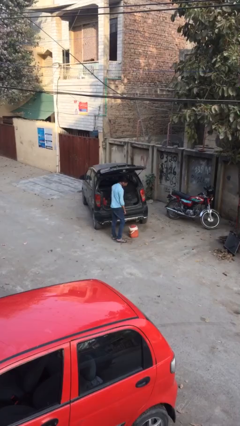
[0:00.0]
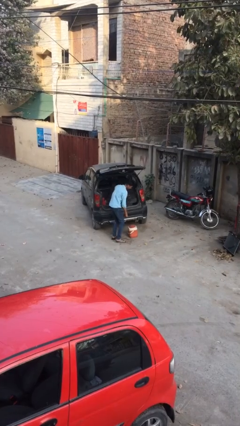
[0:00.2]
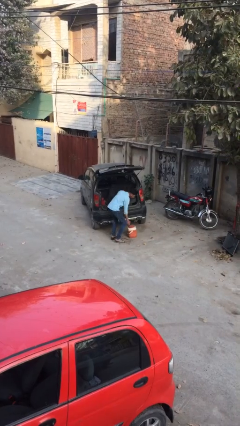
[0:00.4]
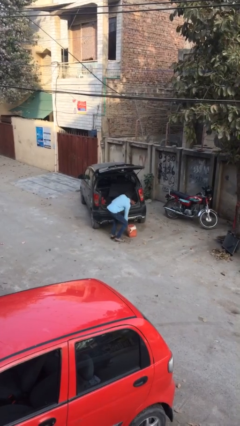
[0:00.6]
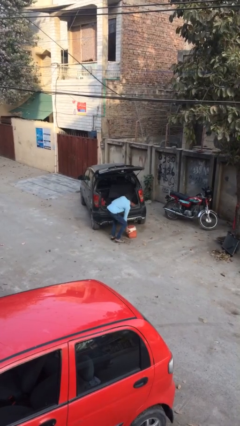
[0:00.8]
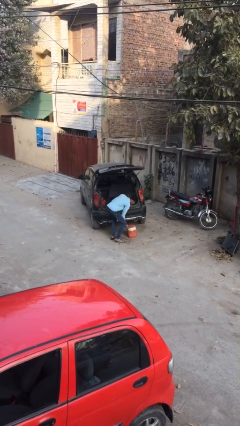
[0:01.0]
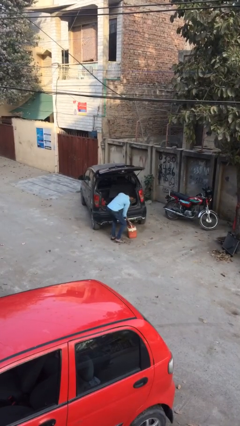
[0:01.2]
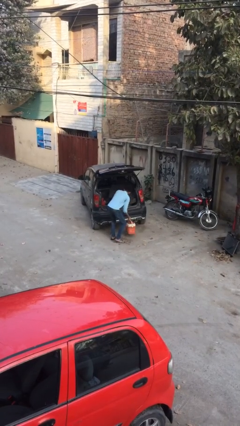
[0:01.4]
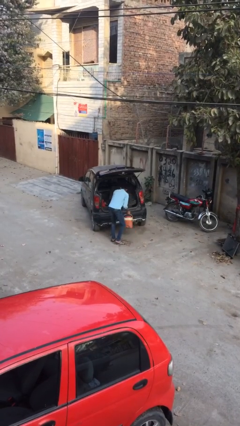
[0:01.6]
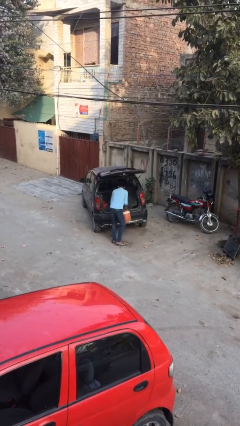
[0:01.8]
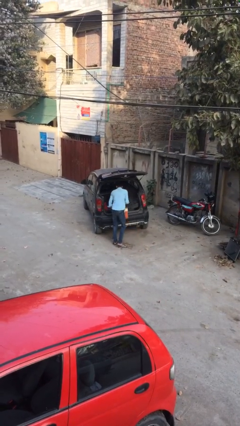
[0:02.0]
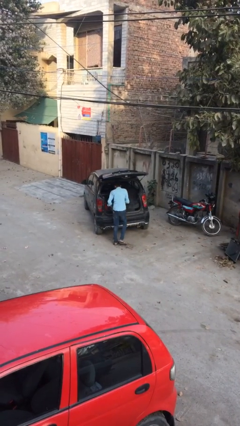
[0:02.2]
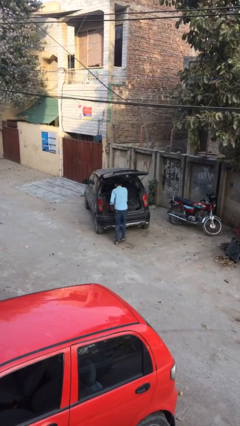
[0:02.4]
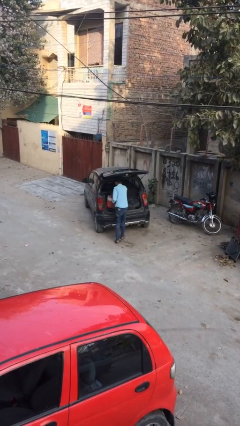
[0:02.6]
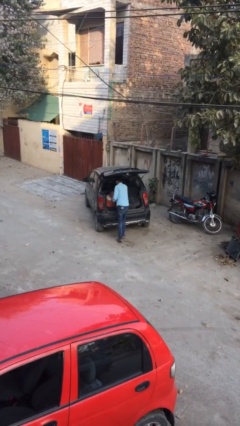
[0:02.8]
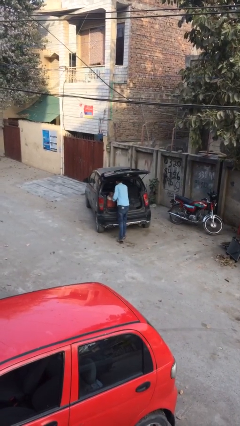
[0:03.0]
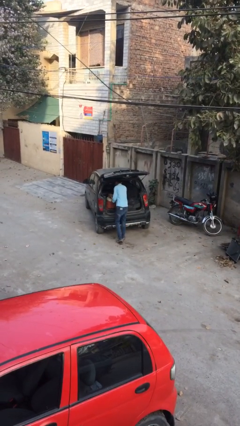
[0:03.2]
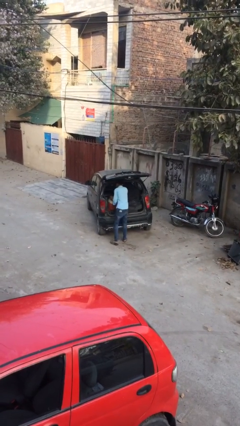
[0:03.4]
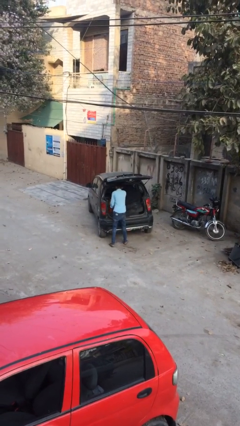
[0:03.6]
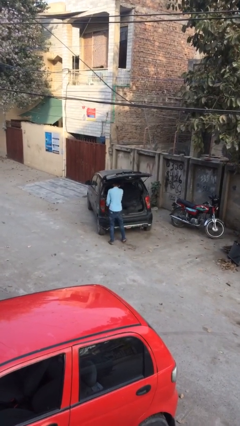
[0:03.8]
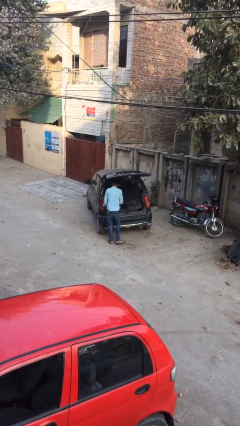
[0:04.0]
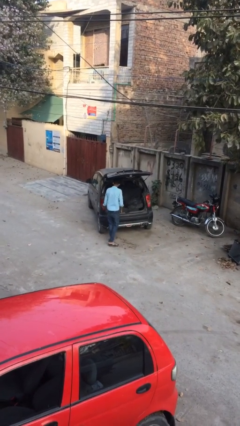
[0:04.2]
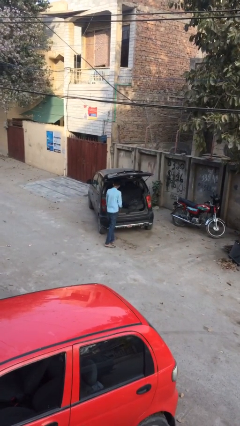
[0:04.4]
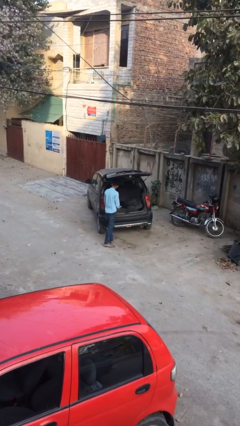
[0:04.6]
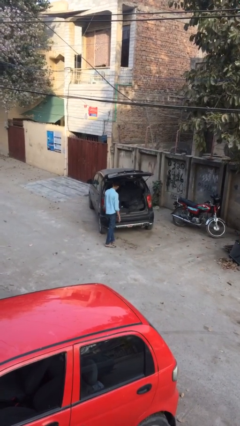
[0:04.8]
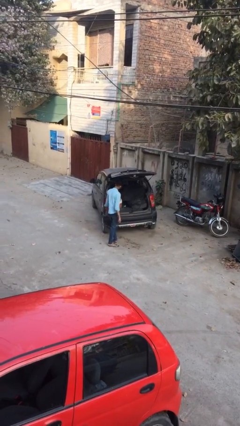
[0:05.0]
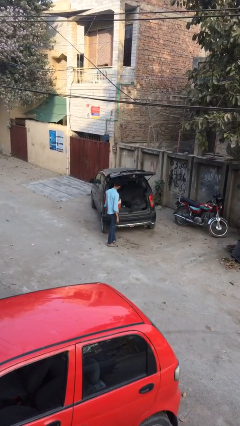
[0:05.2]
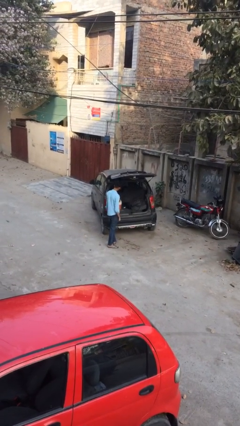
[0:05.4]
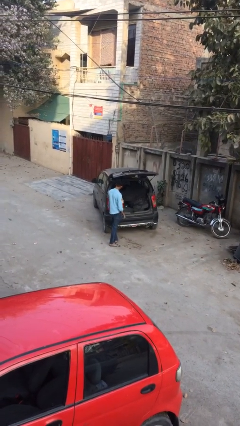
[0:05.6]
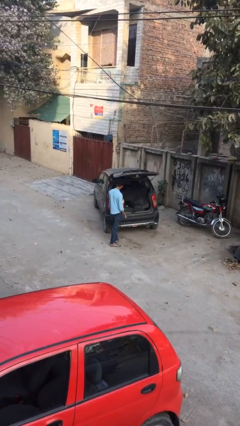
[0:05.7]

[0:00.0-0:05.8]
person loads car

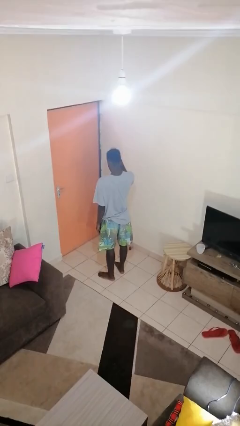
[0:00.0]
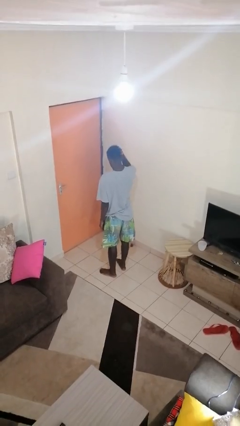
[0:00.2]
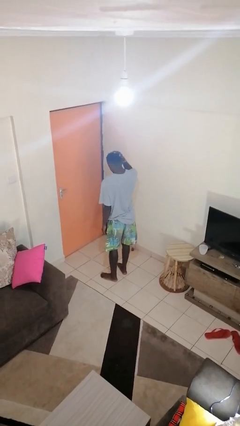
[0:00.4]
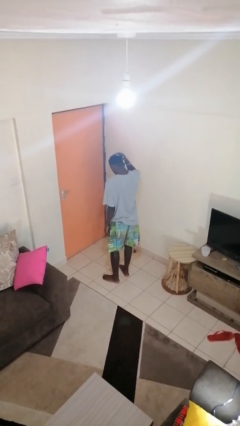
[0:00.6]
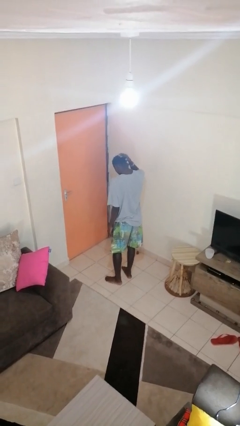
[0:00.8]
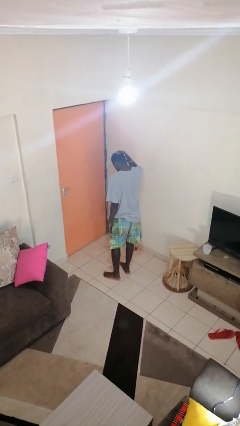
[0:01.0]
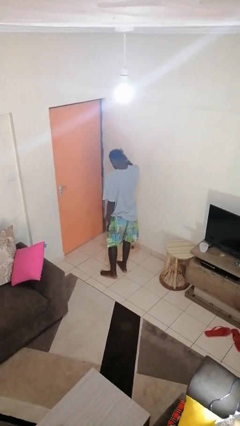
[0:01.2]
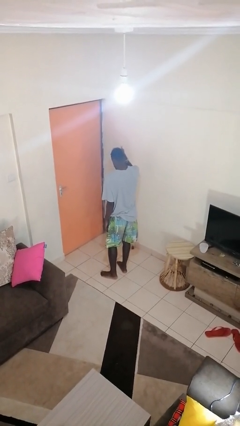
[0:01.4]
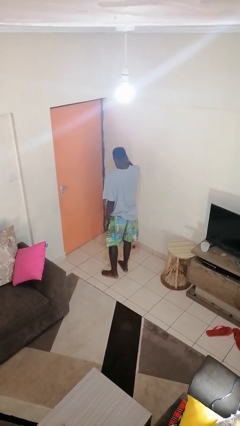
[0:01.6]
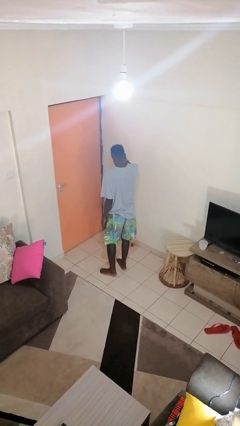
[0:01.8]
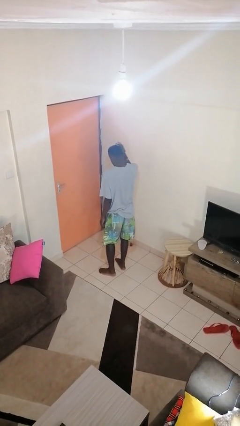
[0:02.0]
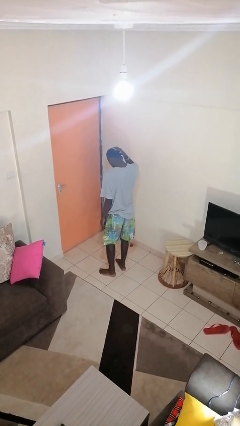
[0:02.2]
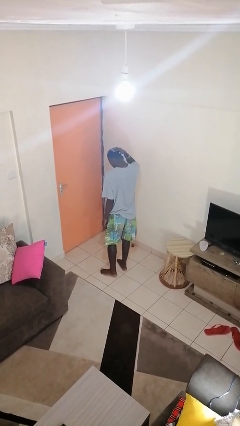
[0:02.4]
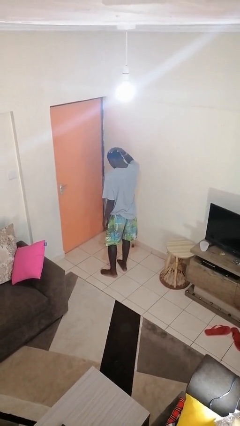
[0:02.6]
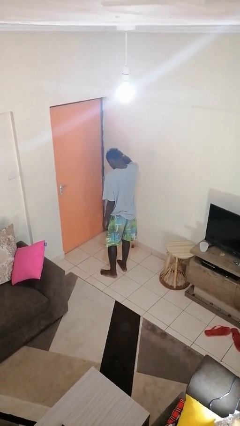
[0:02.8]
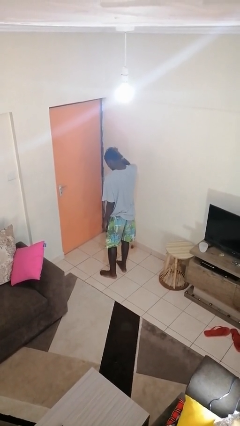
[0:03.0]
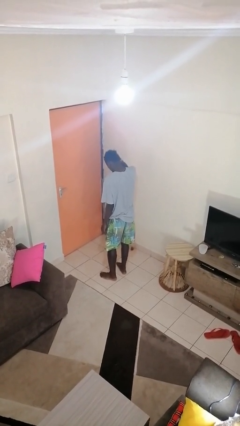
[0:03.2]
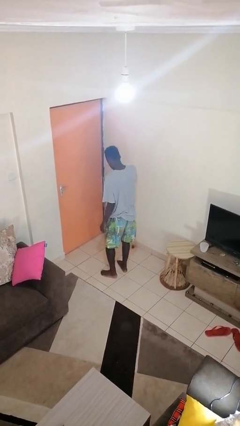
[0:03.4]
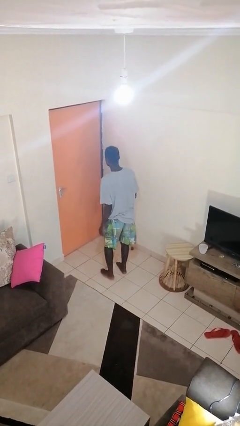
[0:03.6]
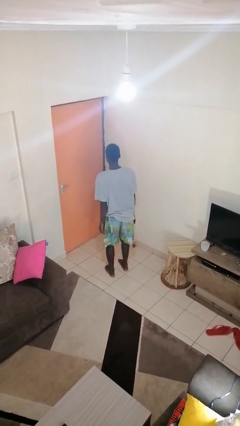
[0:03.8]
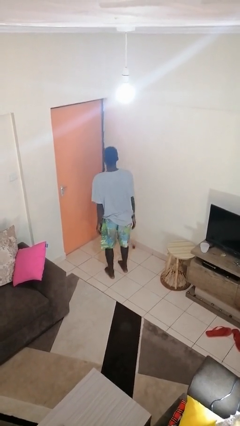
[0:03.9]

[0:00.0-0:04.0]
person pats head

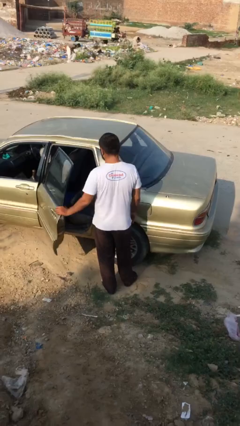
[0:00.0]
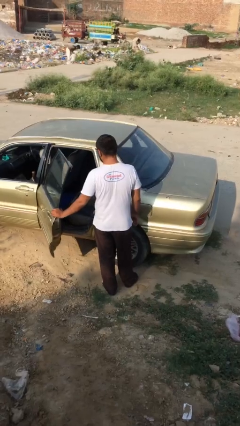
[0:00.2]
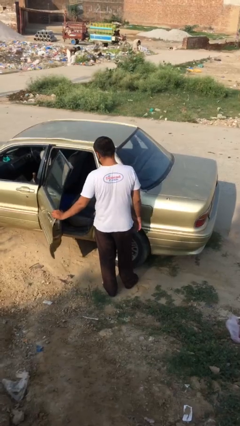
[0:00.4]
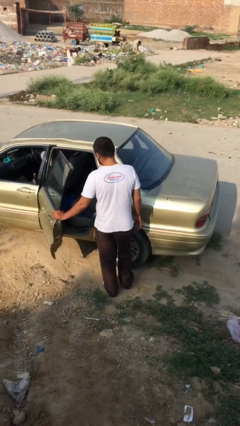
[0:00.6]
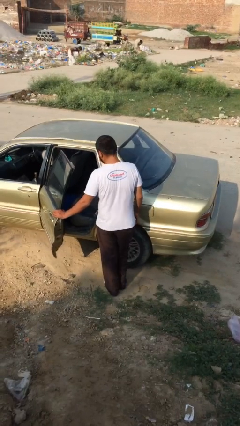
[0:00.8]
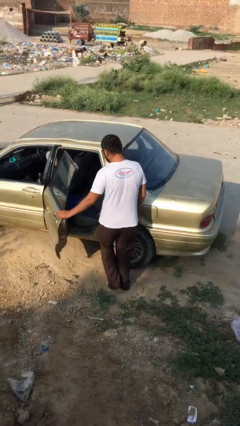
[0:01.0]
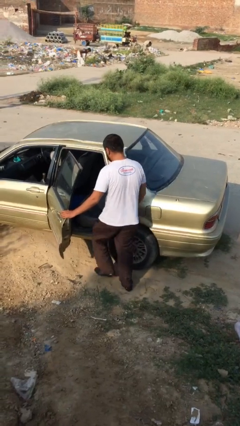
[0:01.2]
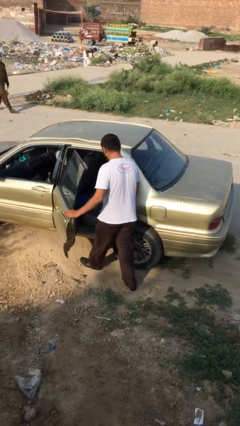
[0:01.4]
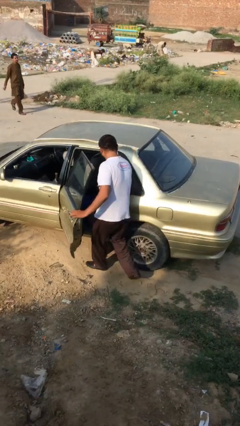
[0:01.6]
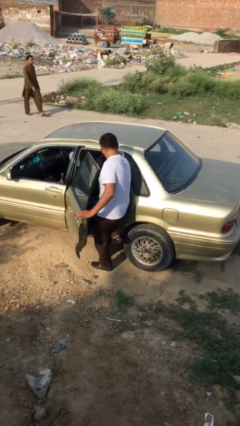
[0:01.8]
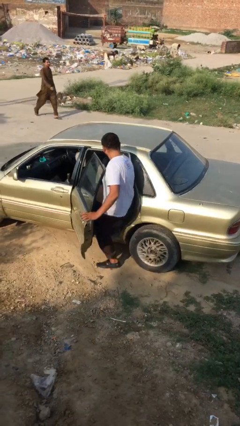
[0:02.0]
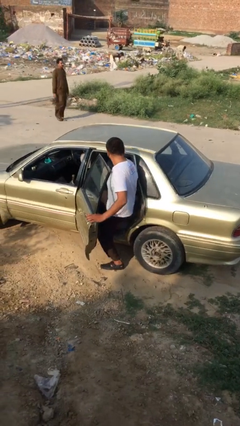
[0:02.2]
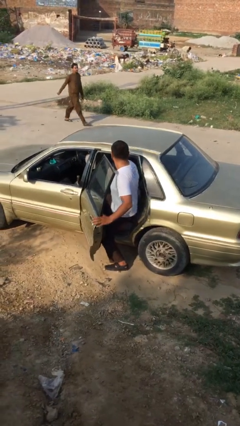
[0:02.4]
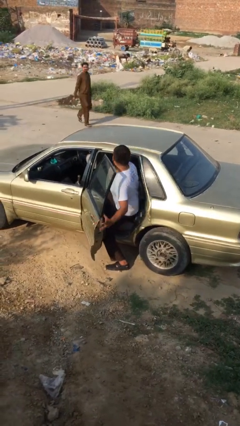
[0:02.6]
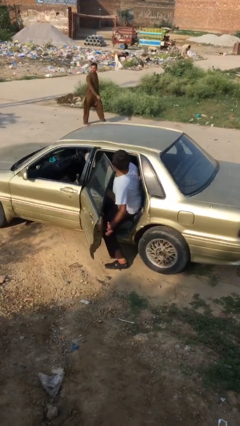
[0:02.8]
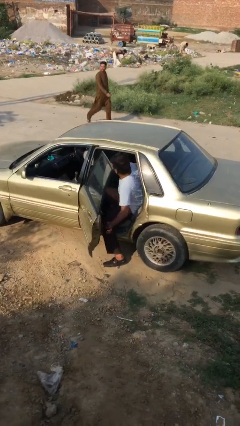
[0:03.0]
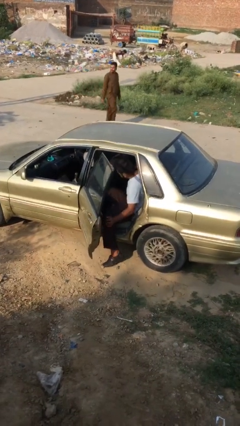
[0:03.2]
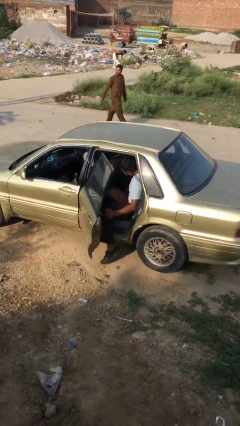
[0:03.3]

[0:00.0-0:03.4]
person enters car

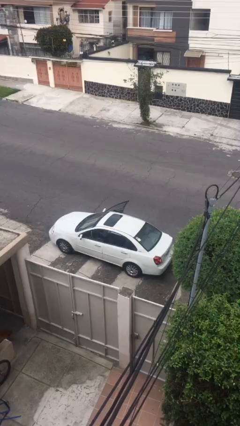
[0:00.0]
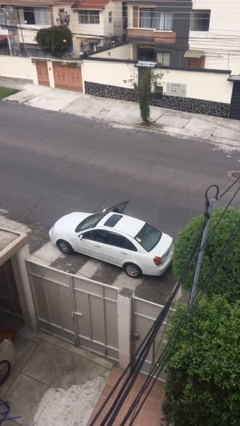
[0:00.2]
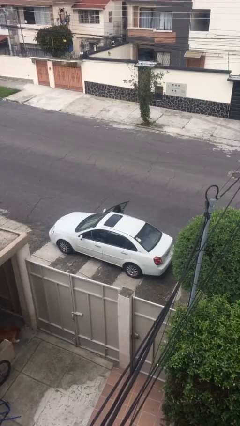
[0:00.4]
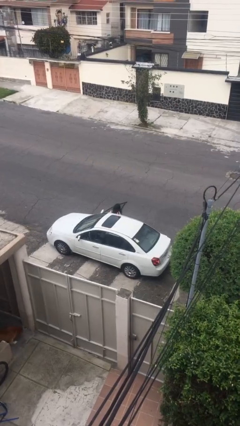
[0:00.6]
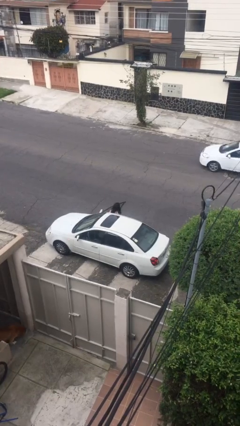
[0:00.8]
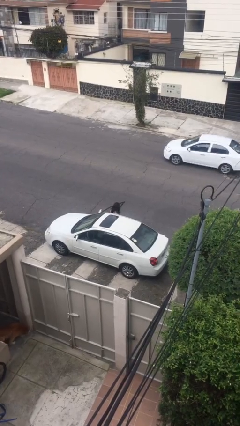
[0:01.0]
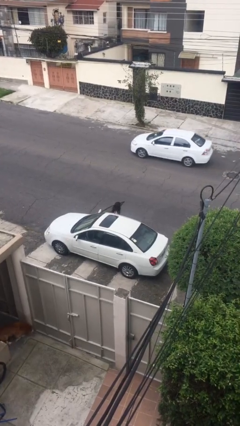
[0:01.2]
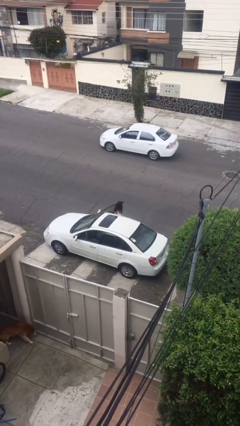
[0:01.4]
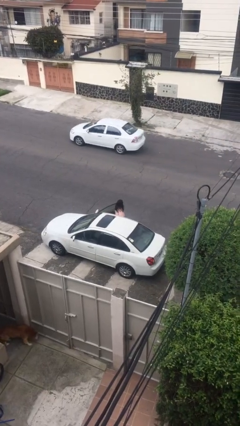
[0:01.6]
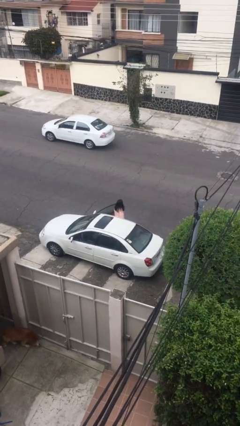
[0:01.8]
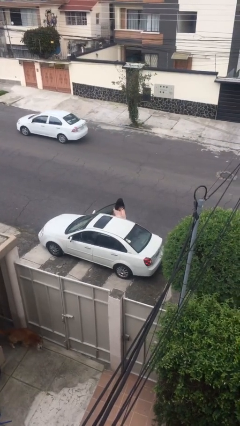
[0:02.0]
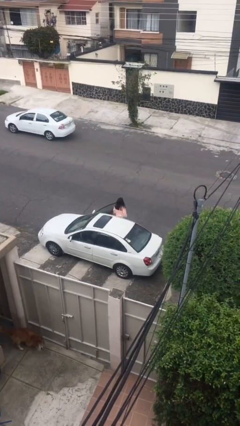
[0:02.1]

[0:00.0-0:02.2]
person exits car

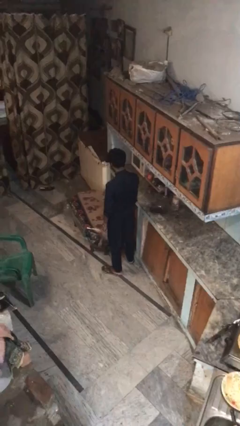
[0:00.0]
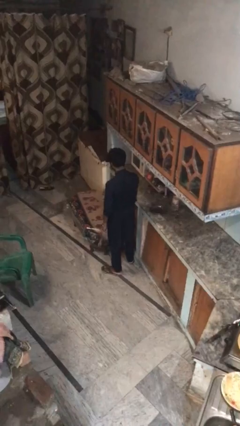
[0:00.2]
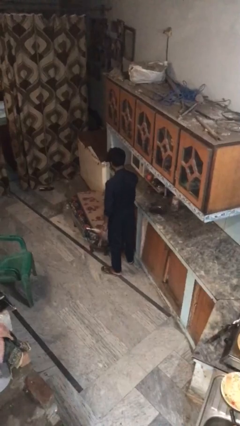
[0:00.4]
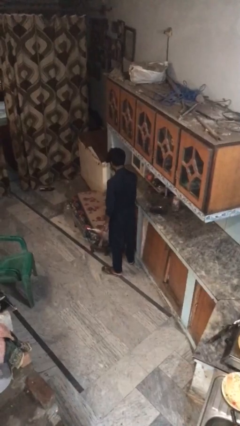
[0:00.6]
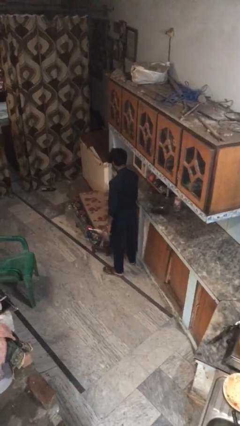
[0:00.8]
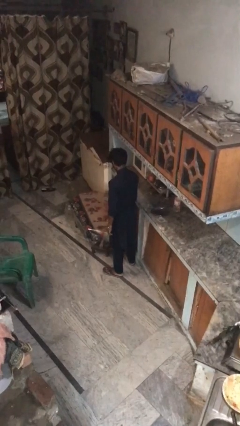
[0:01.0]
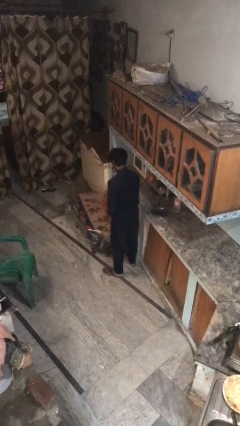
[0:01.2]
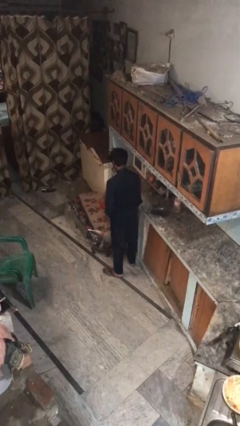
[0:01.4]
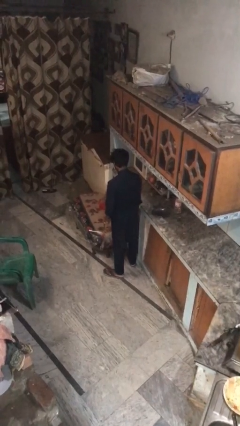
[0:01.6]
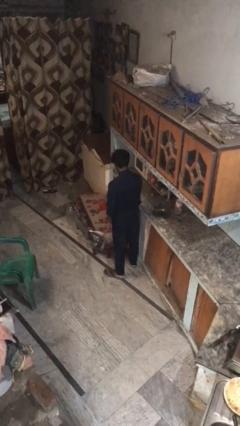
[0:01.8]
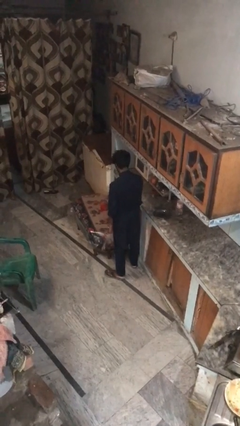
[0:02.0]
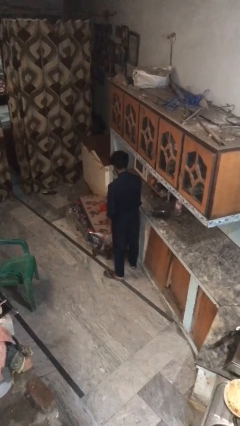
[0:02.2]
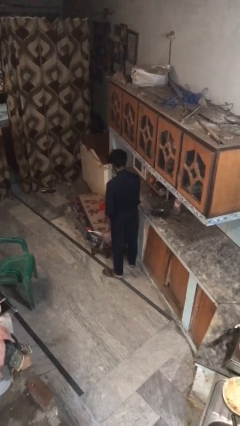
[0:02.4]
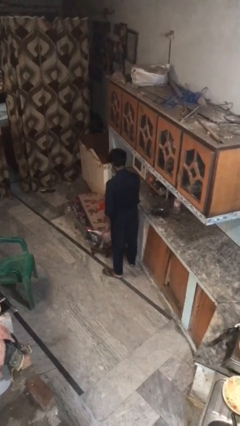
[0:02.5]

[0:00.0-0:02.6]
person throws object on table
